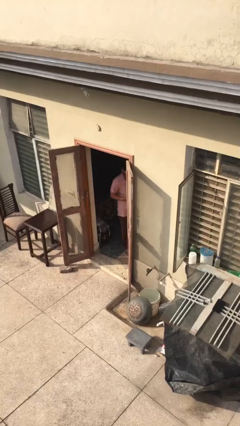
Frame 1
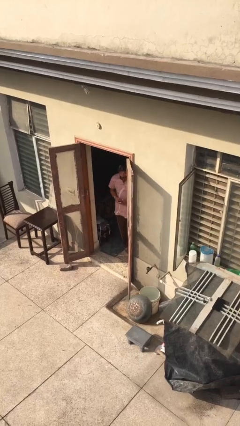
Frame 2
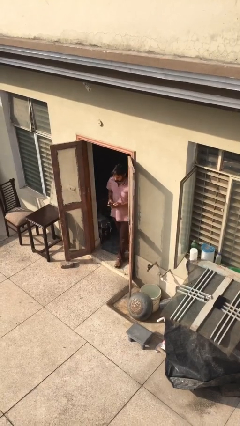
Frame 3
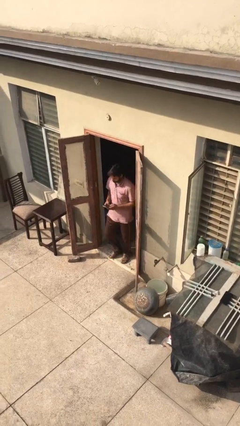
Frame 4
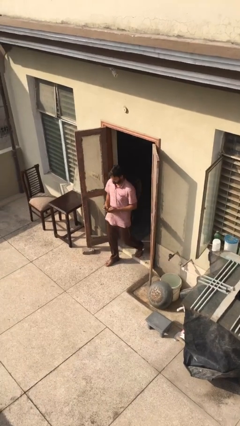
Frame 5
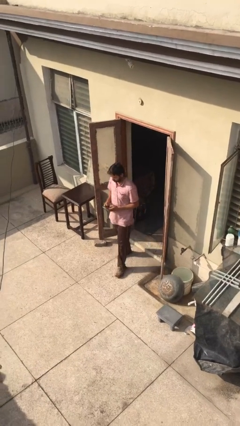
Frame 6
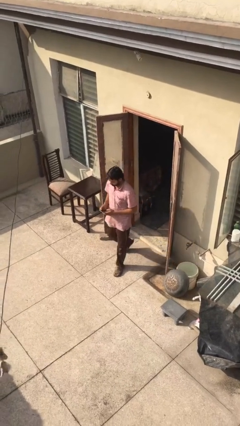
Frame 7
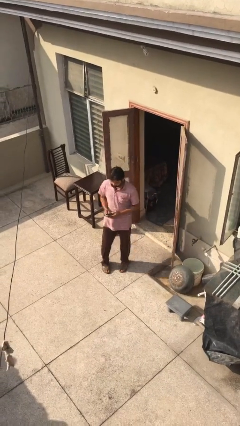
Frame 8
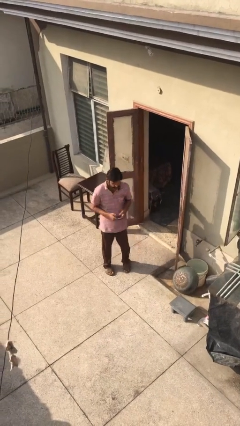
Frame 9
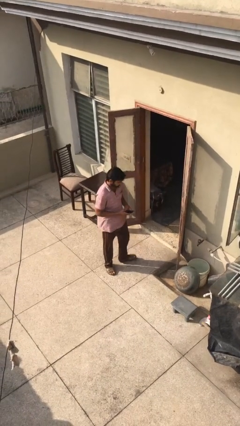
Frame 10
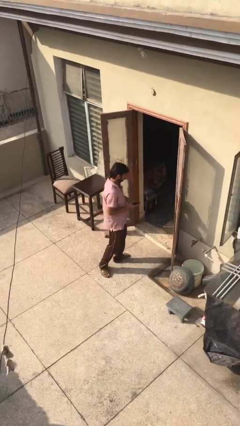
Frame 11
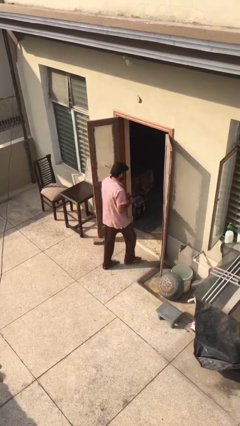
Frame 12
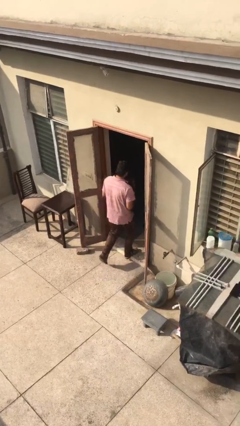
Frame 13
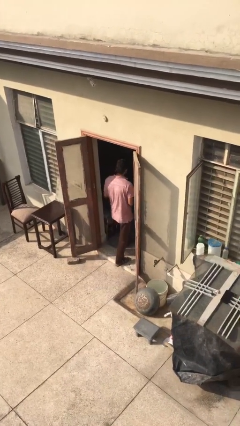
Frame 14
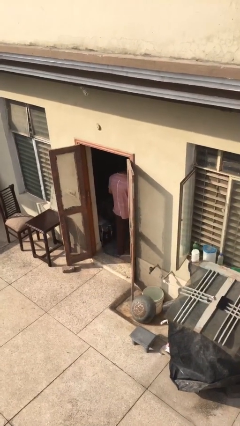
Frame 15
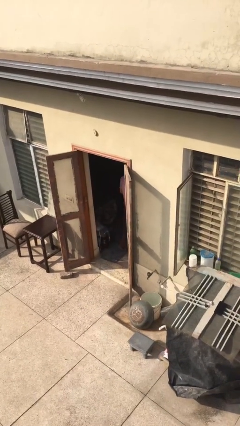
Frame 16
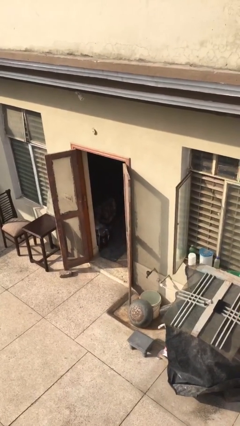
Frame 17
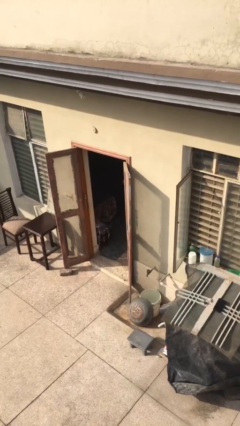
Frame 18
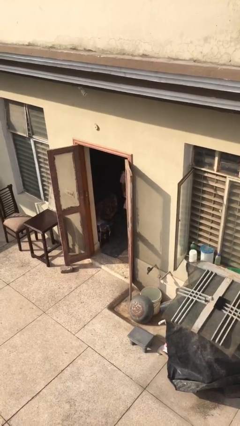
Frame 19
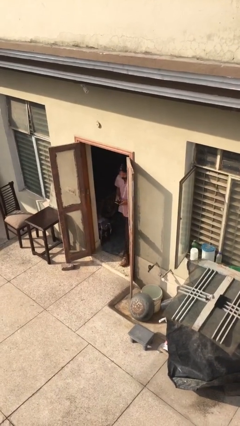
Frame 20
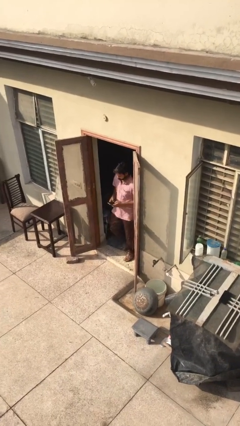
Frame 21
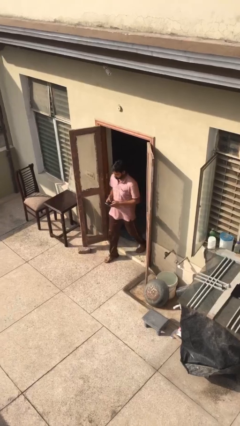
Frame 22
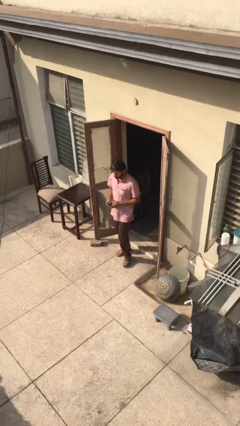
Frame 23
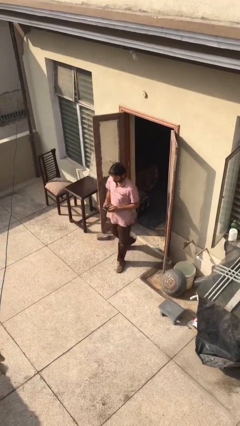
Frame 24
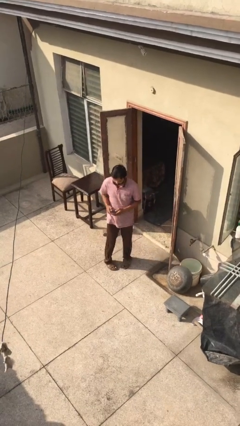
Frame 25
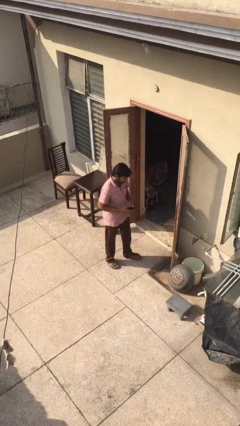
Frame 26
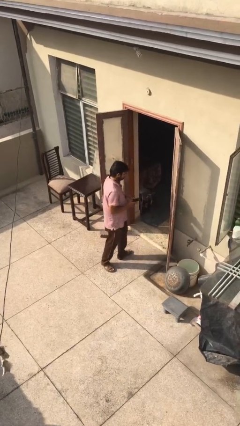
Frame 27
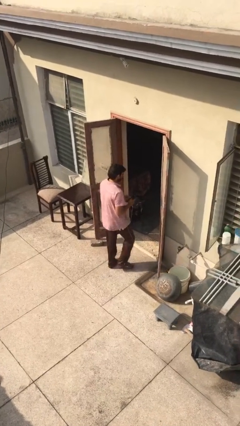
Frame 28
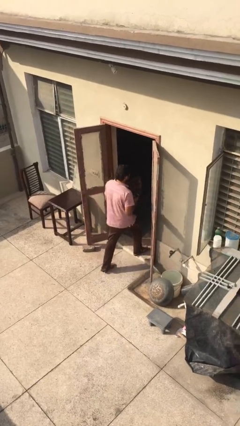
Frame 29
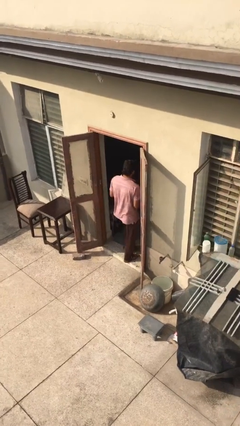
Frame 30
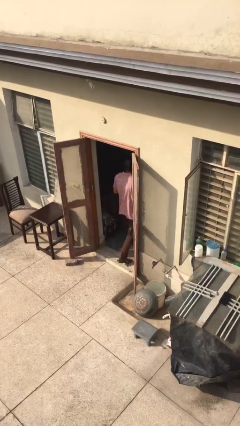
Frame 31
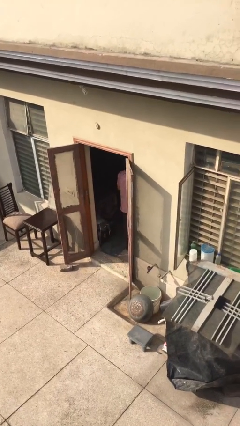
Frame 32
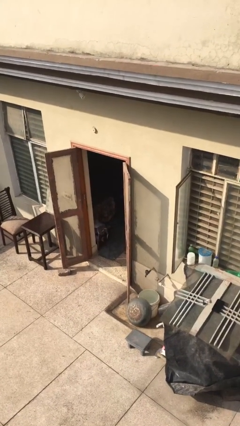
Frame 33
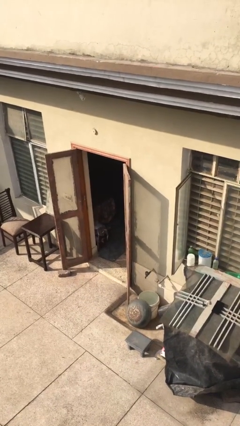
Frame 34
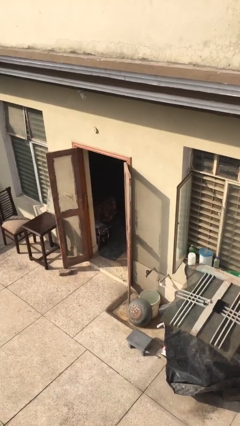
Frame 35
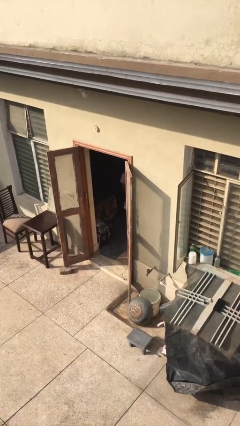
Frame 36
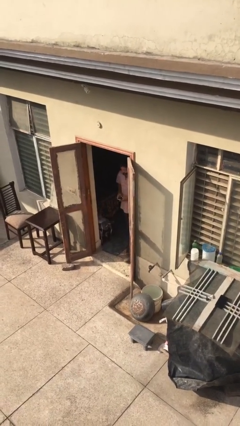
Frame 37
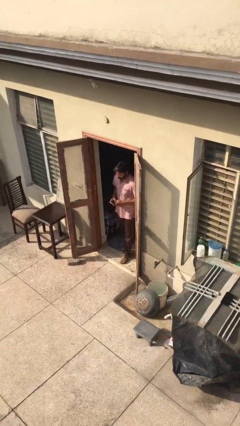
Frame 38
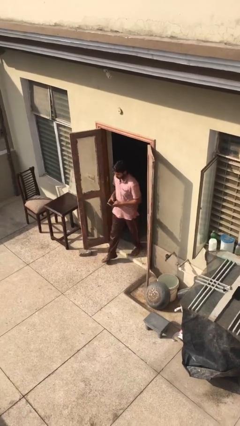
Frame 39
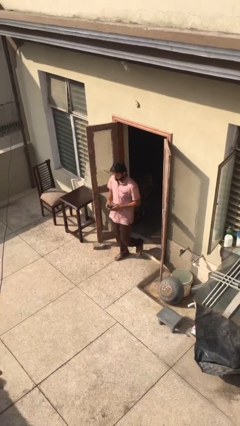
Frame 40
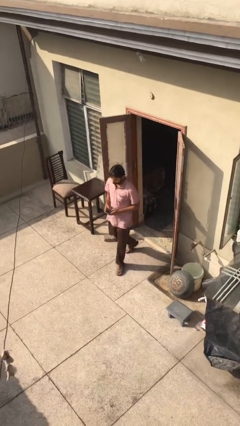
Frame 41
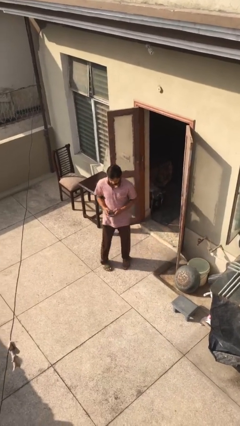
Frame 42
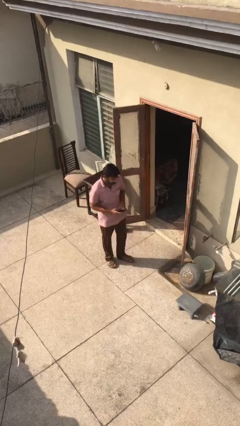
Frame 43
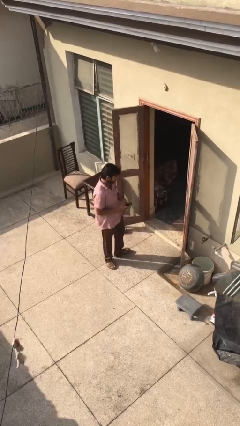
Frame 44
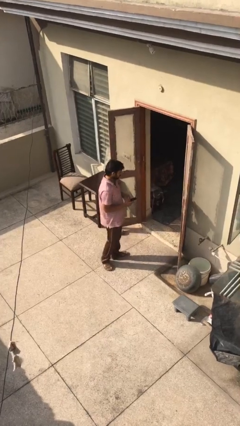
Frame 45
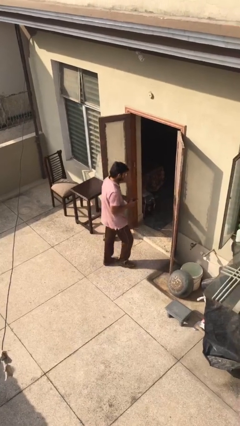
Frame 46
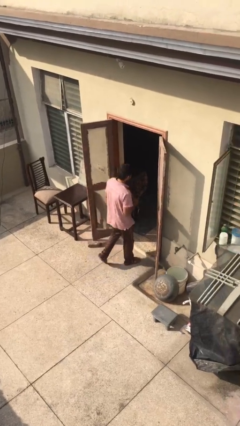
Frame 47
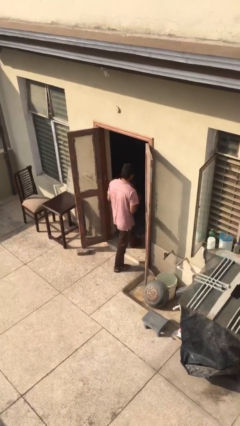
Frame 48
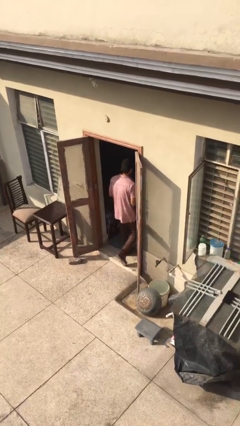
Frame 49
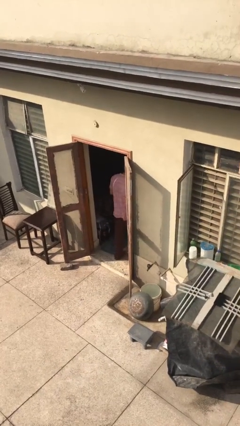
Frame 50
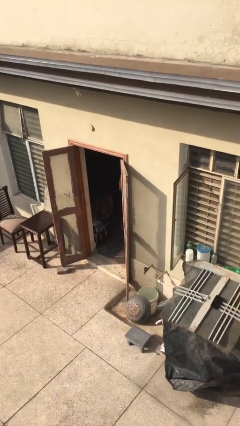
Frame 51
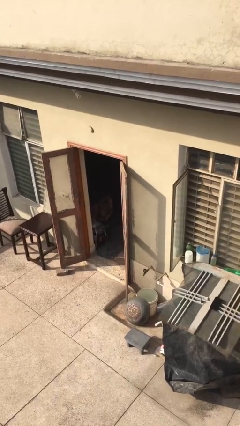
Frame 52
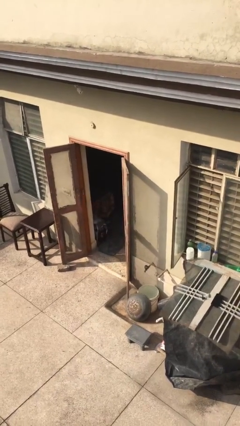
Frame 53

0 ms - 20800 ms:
person texts on phone

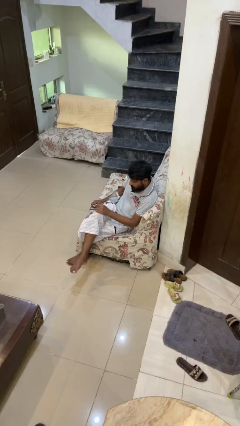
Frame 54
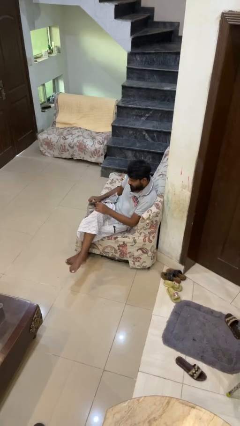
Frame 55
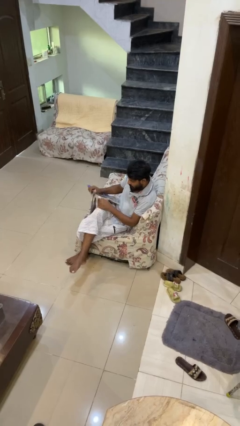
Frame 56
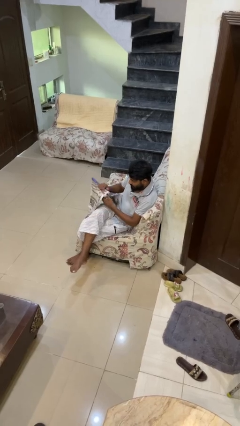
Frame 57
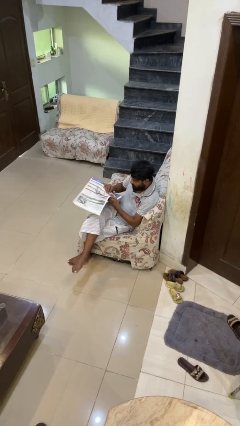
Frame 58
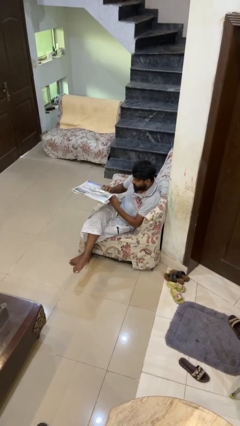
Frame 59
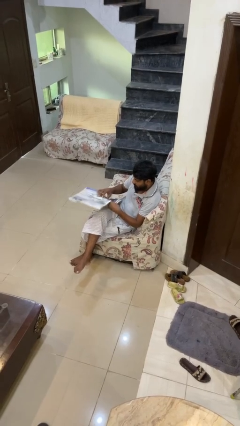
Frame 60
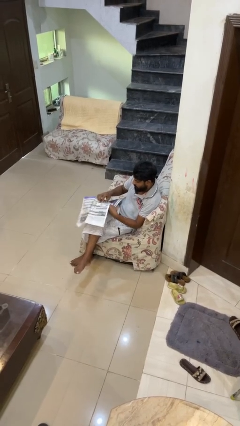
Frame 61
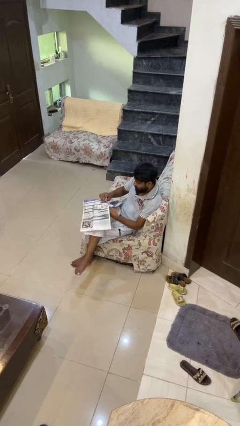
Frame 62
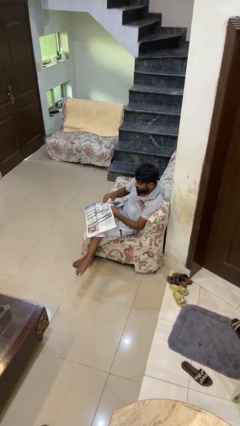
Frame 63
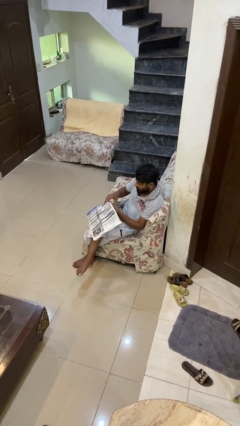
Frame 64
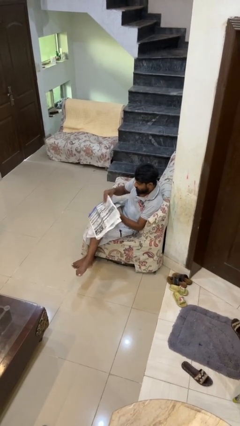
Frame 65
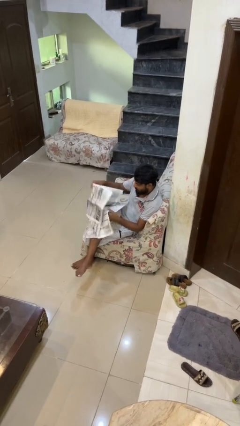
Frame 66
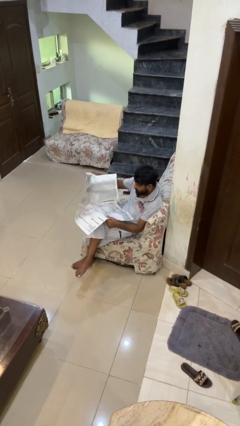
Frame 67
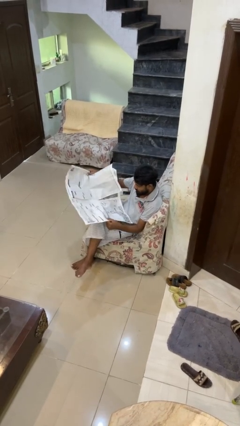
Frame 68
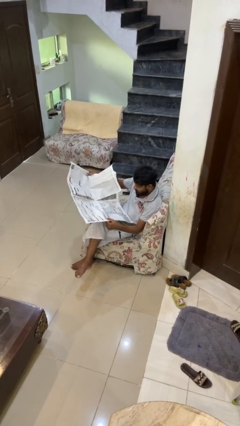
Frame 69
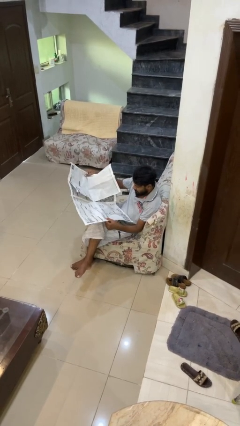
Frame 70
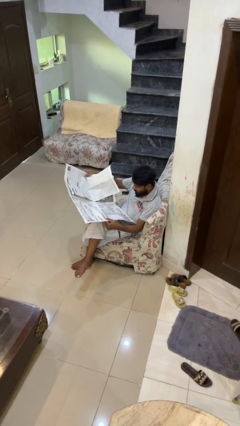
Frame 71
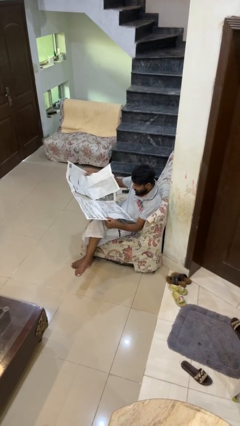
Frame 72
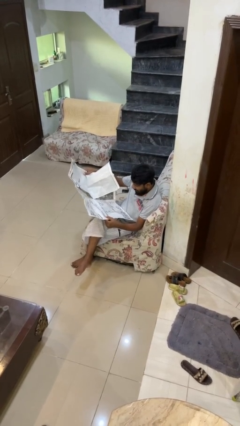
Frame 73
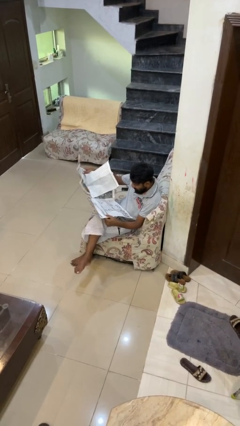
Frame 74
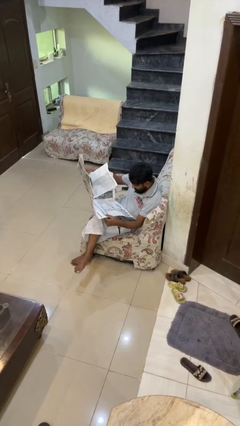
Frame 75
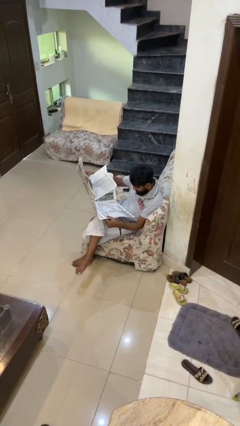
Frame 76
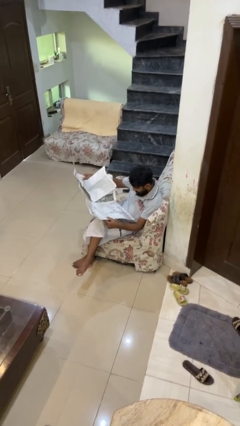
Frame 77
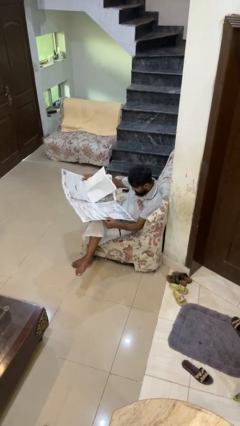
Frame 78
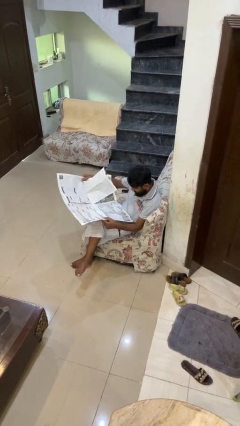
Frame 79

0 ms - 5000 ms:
person reads newspaper

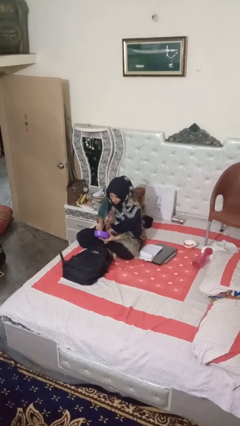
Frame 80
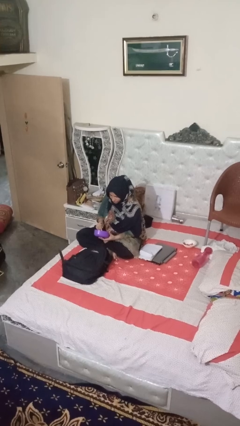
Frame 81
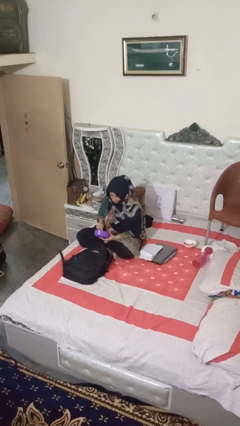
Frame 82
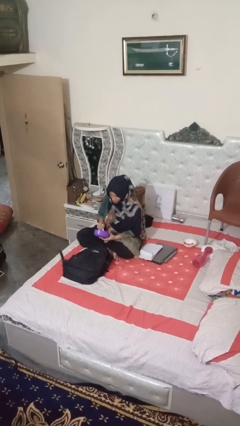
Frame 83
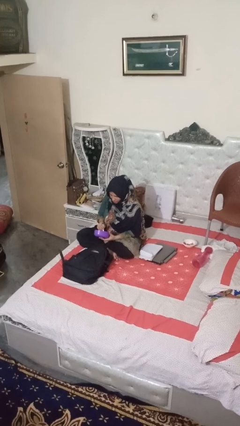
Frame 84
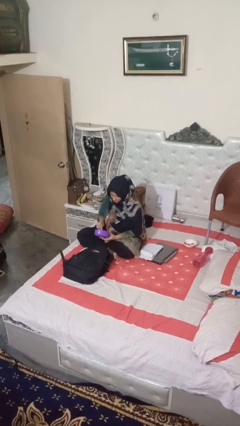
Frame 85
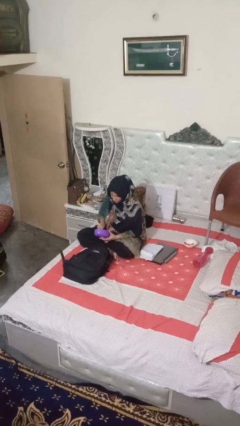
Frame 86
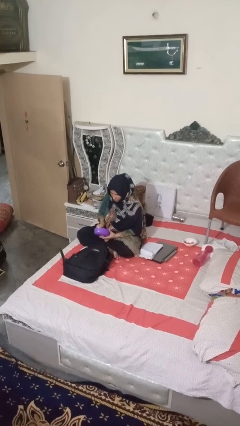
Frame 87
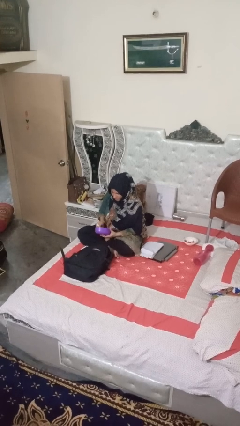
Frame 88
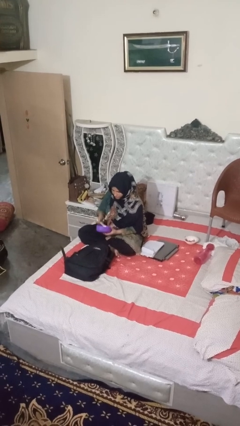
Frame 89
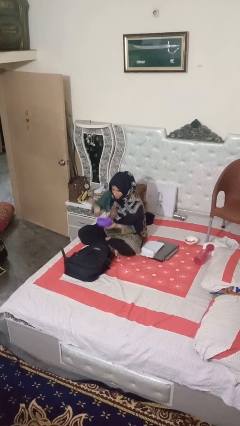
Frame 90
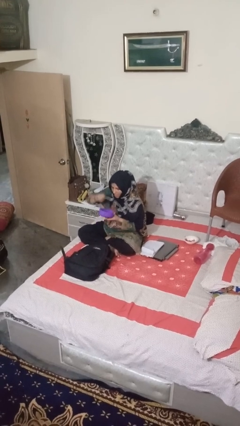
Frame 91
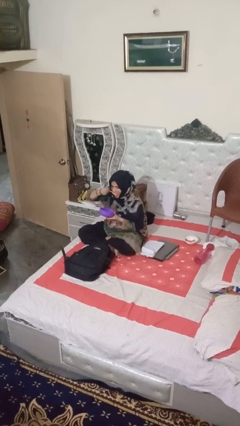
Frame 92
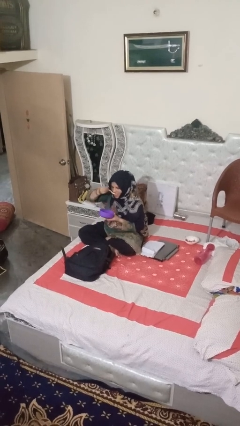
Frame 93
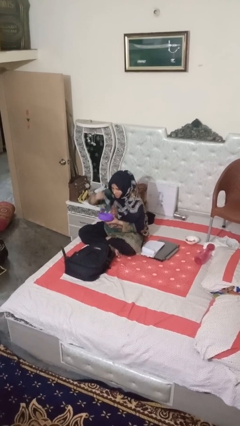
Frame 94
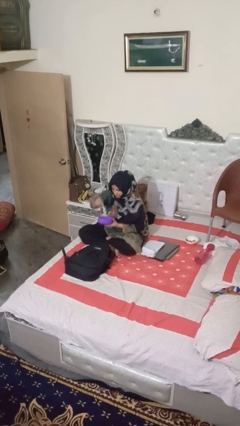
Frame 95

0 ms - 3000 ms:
person eats snack from bag
